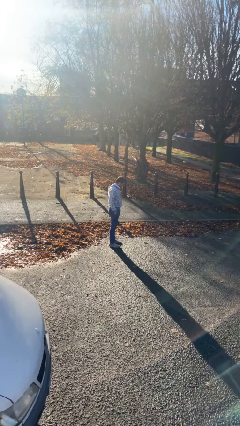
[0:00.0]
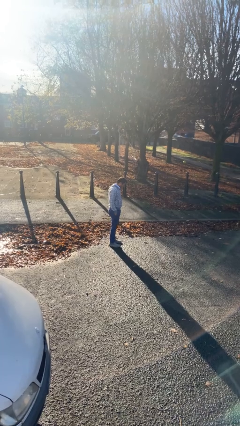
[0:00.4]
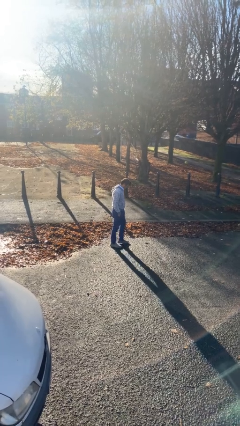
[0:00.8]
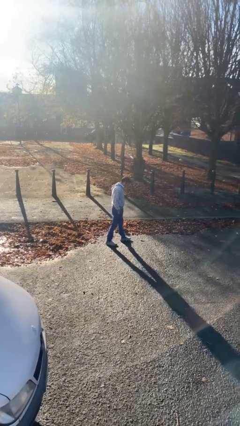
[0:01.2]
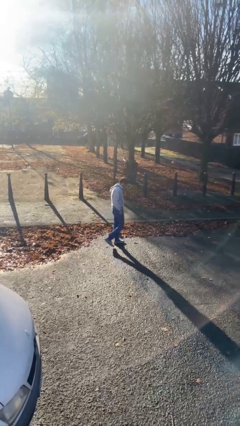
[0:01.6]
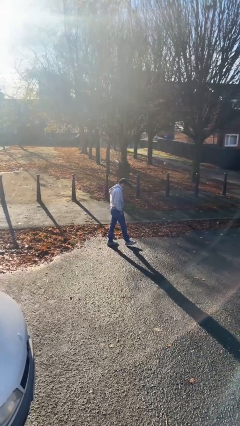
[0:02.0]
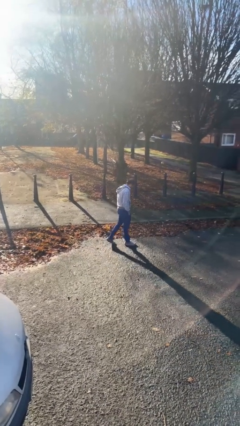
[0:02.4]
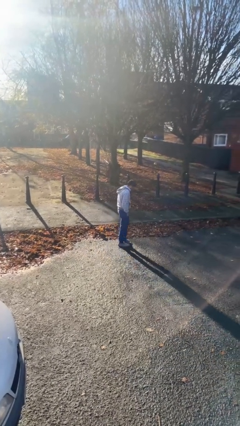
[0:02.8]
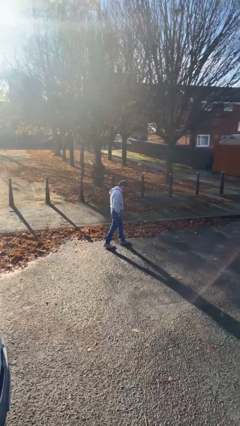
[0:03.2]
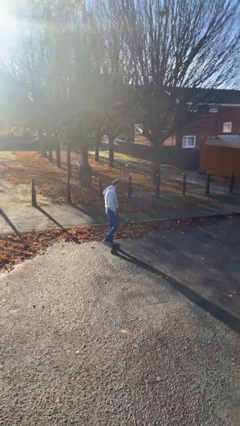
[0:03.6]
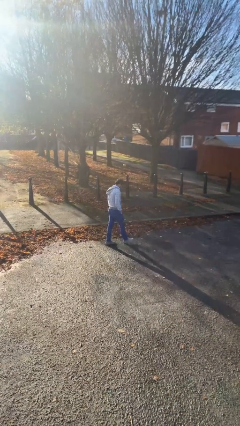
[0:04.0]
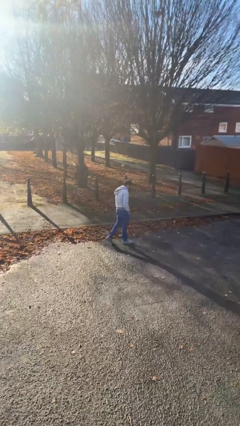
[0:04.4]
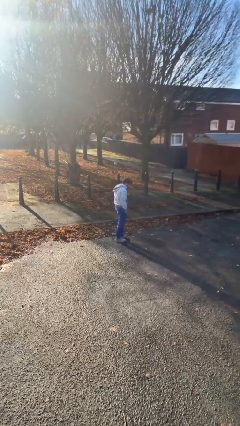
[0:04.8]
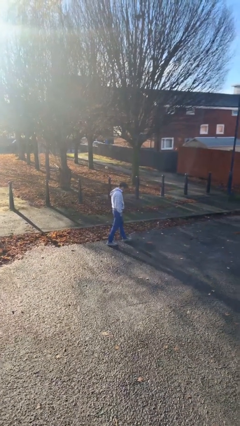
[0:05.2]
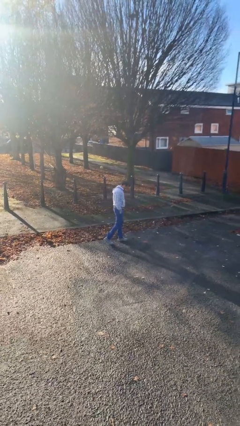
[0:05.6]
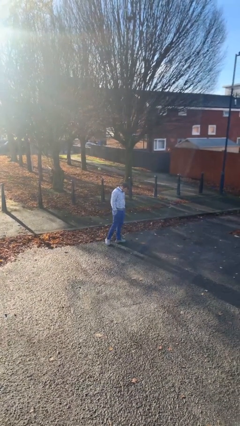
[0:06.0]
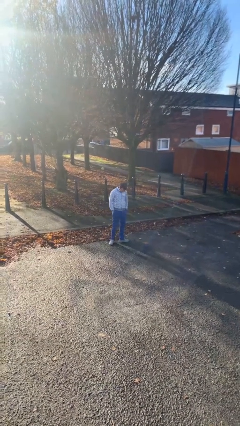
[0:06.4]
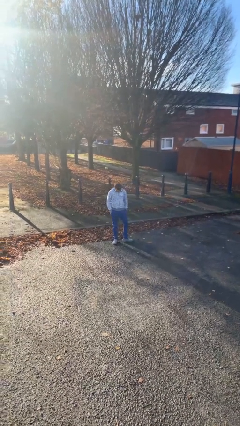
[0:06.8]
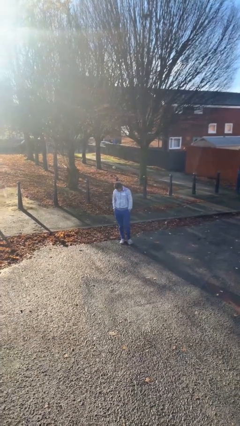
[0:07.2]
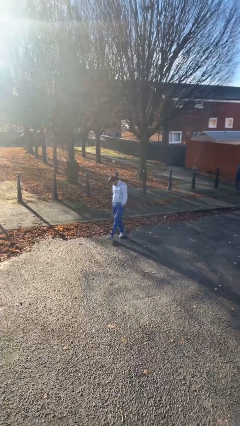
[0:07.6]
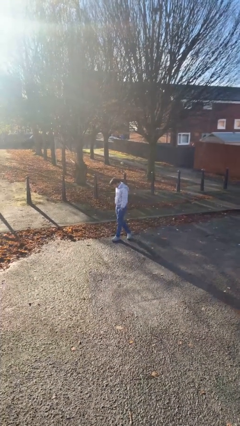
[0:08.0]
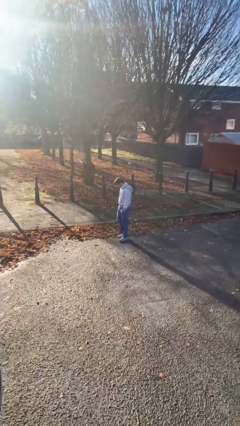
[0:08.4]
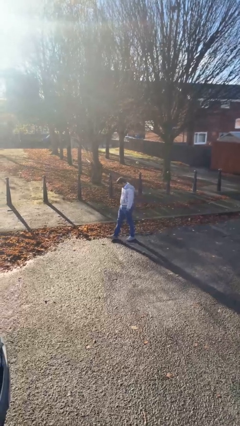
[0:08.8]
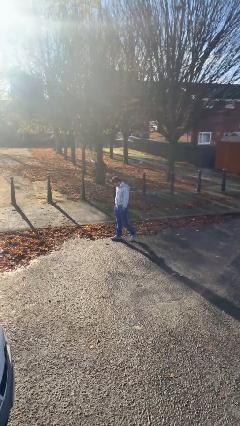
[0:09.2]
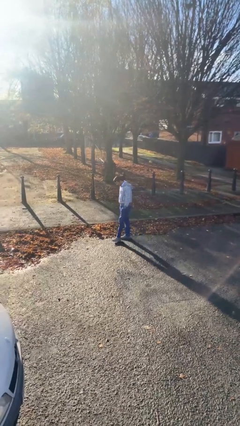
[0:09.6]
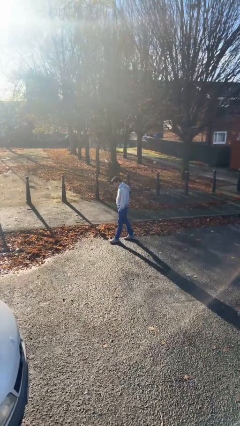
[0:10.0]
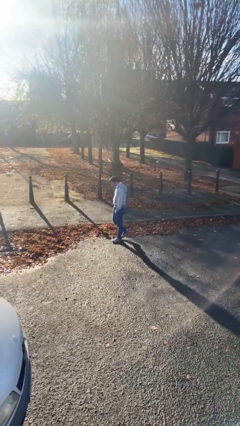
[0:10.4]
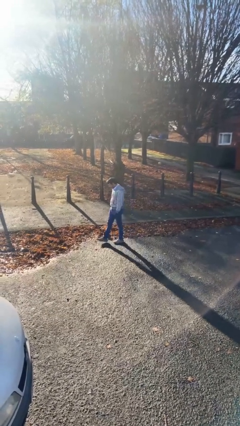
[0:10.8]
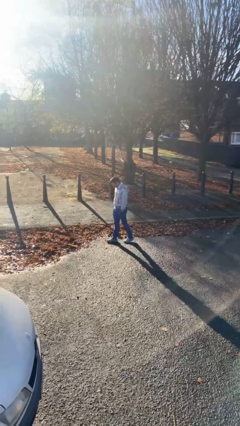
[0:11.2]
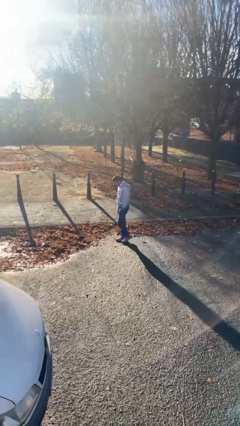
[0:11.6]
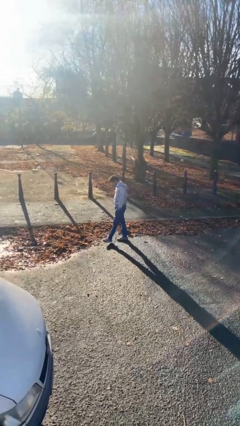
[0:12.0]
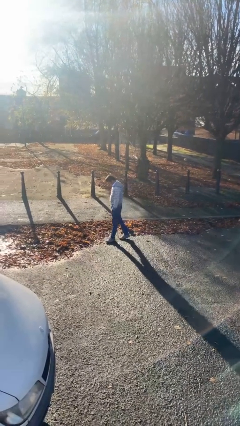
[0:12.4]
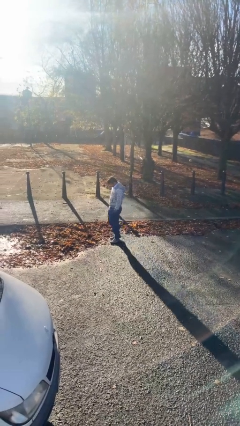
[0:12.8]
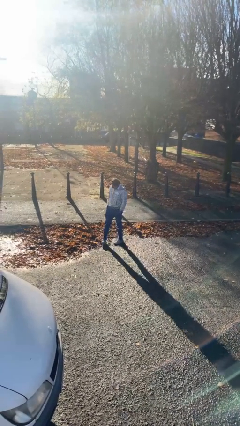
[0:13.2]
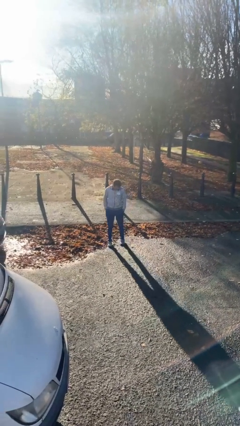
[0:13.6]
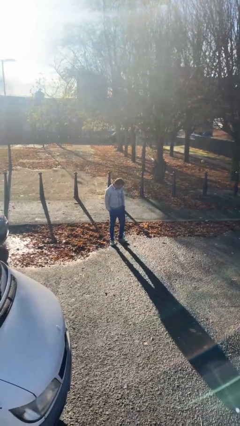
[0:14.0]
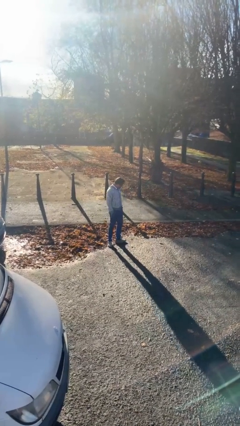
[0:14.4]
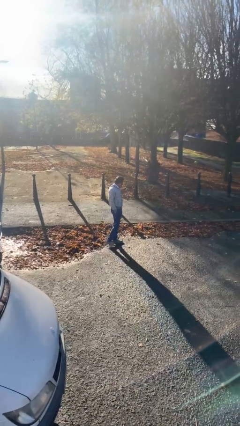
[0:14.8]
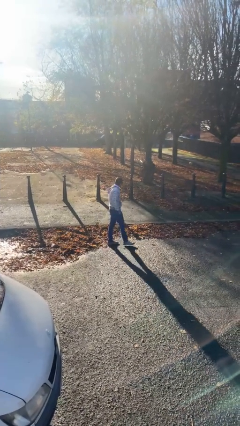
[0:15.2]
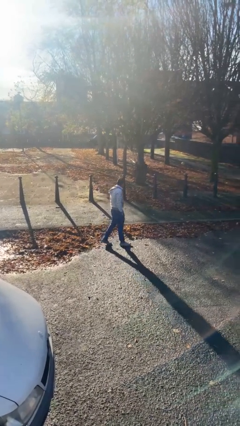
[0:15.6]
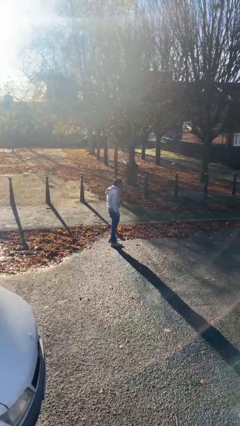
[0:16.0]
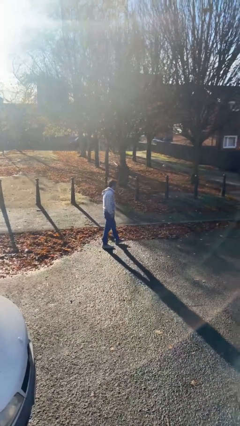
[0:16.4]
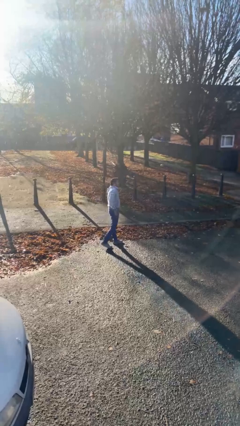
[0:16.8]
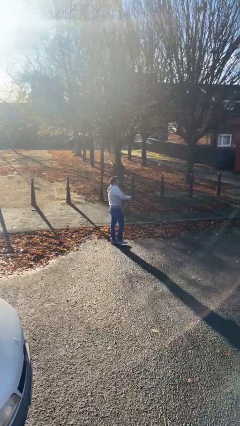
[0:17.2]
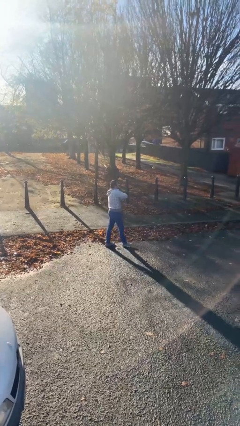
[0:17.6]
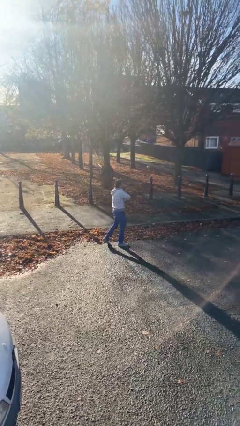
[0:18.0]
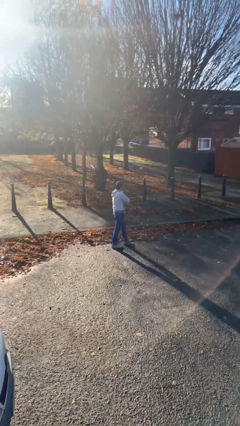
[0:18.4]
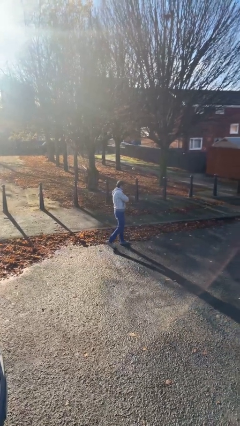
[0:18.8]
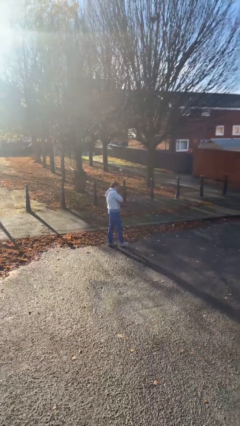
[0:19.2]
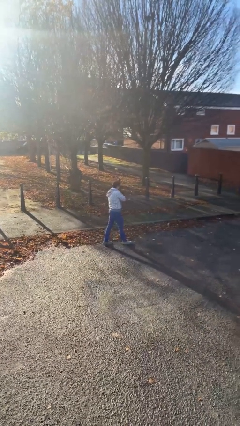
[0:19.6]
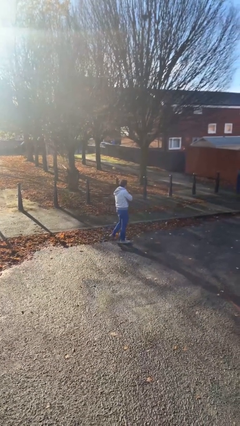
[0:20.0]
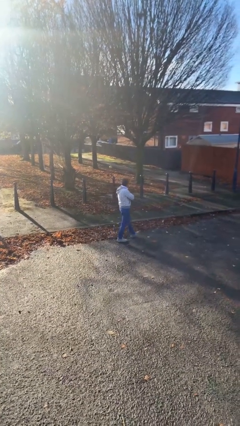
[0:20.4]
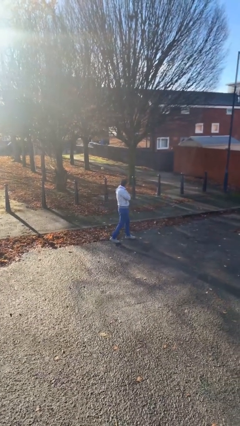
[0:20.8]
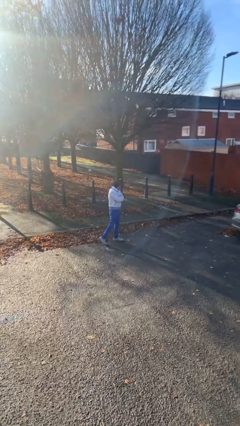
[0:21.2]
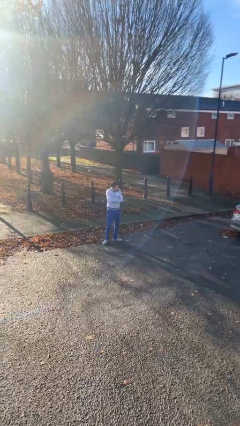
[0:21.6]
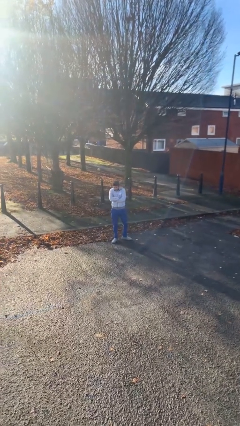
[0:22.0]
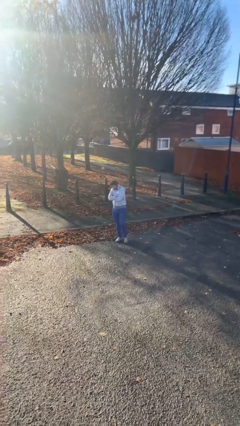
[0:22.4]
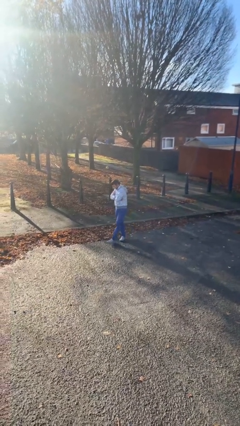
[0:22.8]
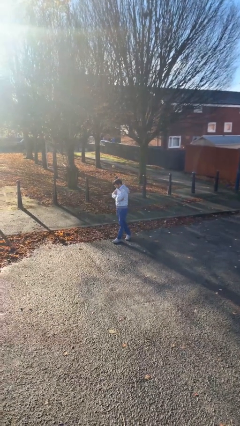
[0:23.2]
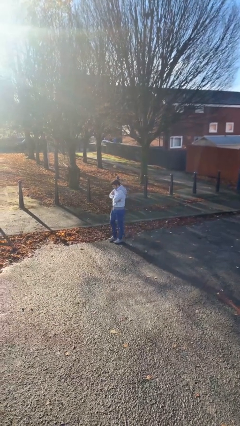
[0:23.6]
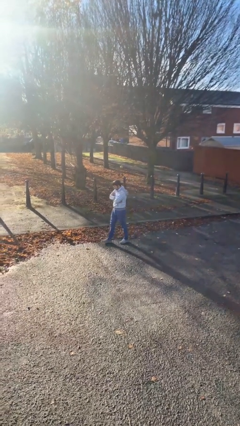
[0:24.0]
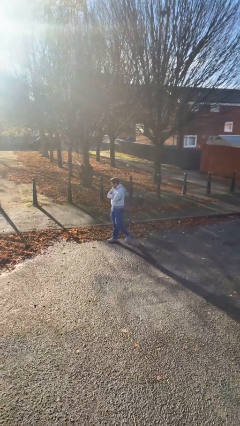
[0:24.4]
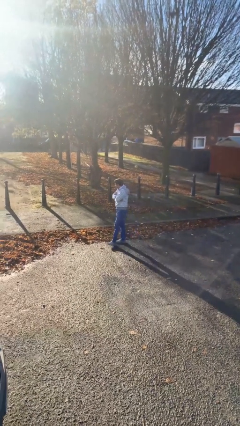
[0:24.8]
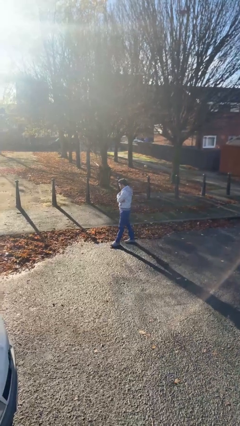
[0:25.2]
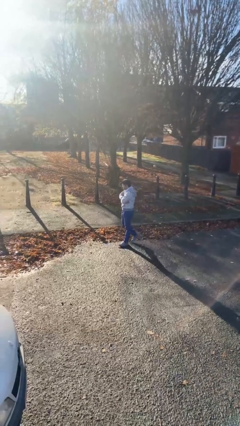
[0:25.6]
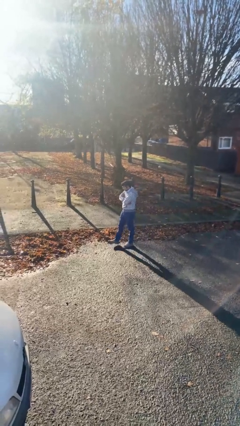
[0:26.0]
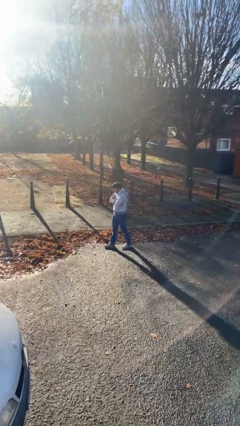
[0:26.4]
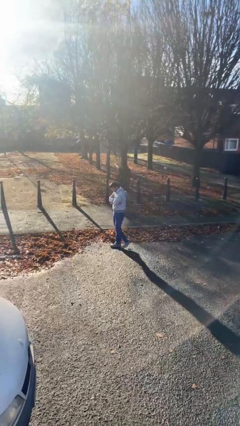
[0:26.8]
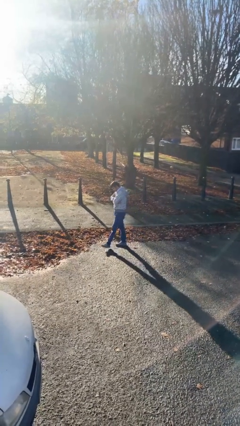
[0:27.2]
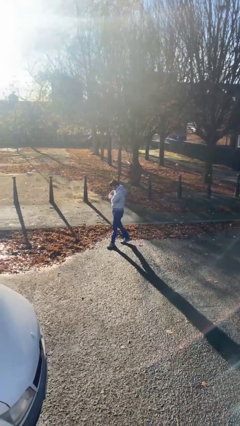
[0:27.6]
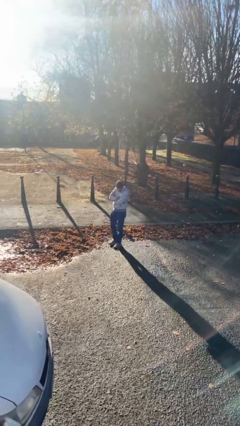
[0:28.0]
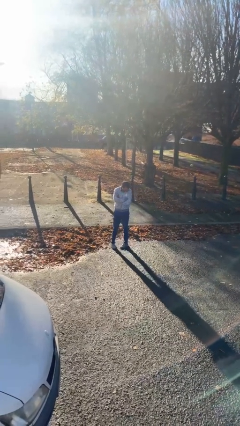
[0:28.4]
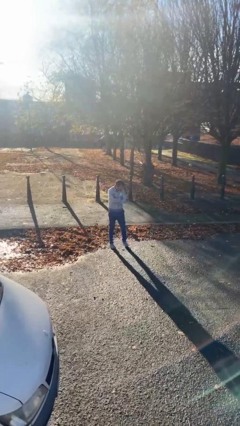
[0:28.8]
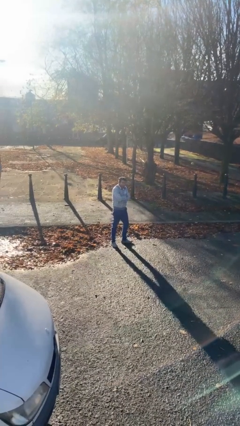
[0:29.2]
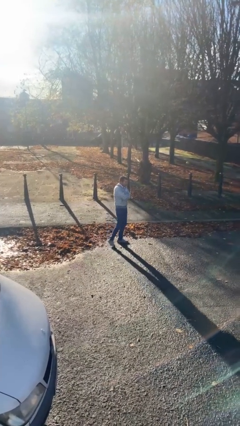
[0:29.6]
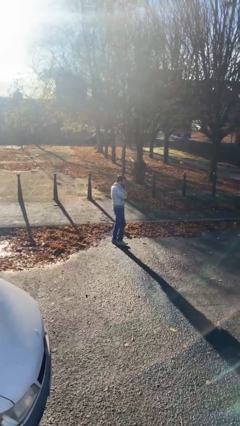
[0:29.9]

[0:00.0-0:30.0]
person walks

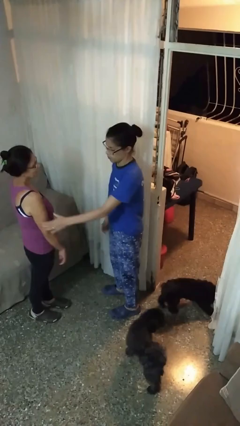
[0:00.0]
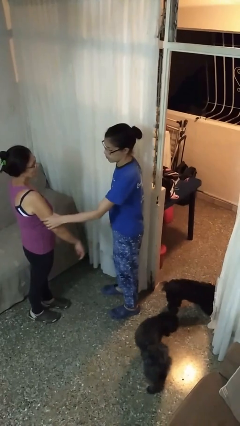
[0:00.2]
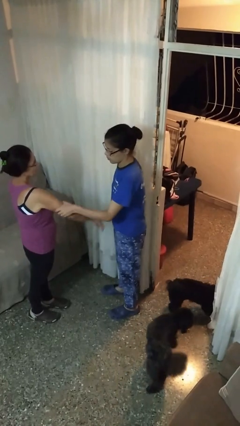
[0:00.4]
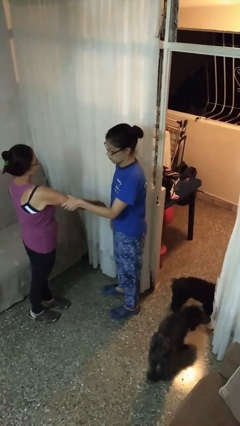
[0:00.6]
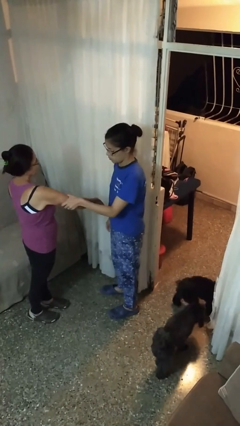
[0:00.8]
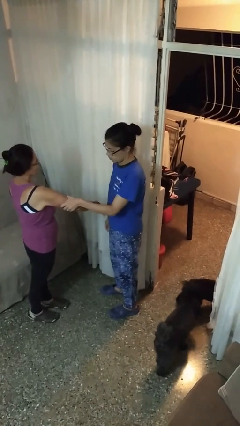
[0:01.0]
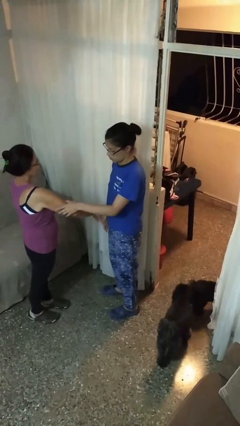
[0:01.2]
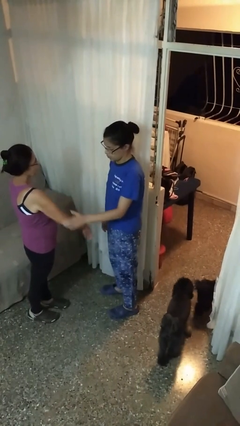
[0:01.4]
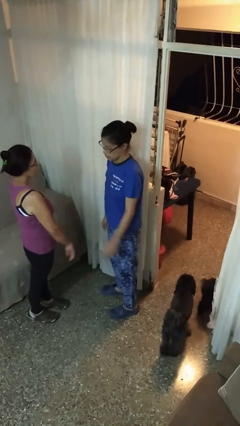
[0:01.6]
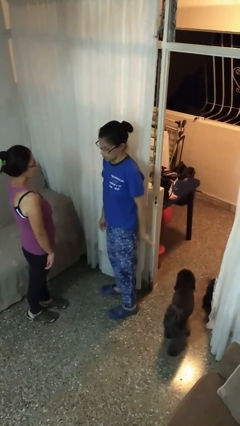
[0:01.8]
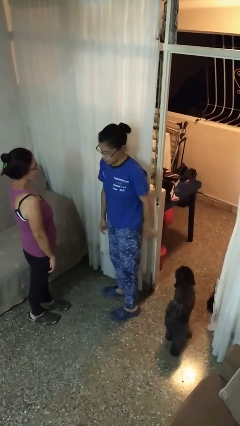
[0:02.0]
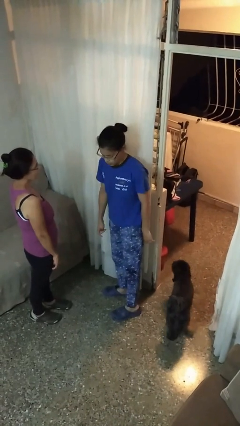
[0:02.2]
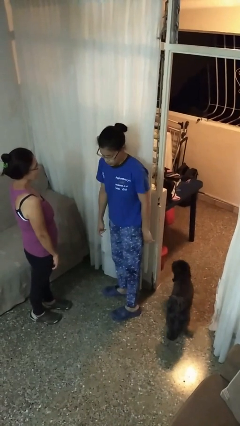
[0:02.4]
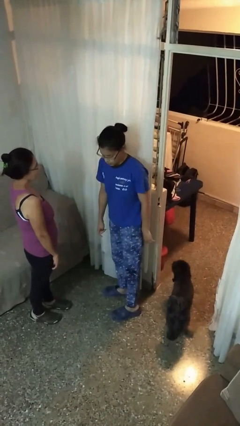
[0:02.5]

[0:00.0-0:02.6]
person grabs person by bicep

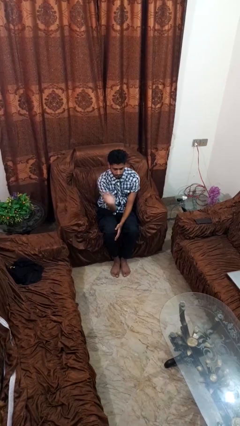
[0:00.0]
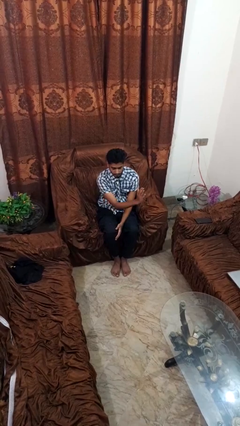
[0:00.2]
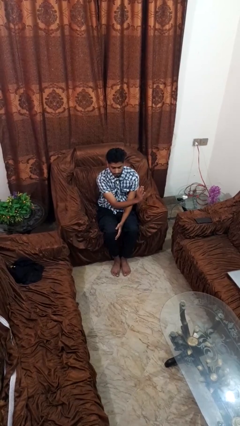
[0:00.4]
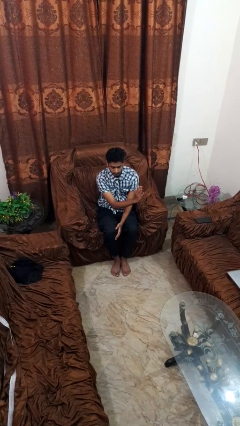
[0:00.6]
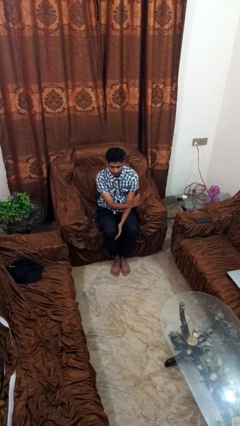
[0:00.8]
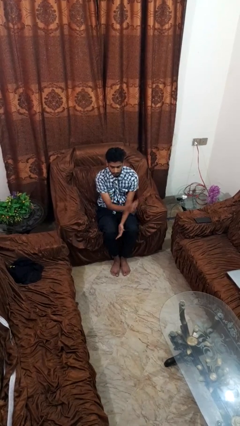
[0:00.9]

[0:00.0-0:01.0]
person gestures swipe left
